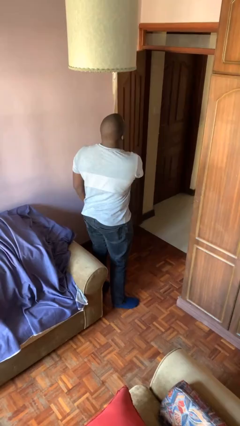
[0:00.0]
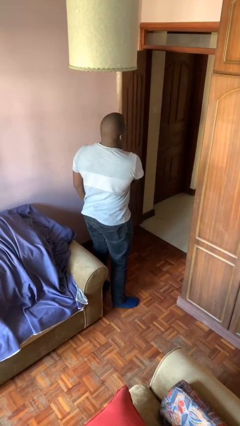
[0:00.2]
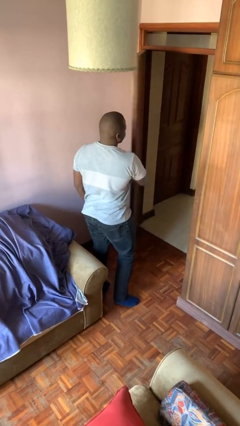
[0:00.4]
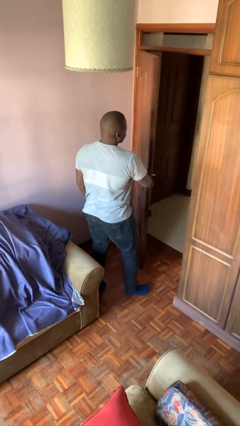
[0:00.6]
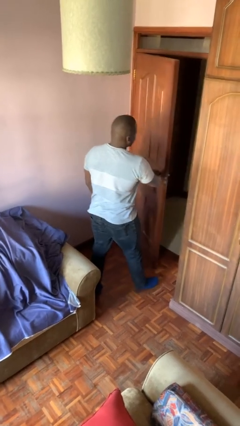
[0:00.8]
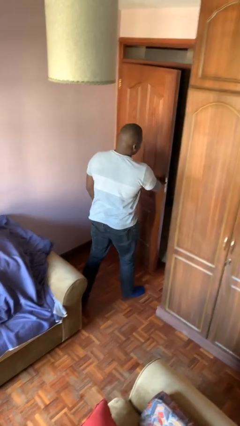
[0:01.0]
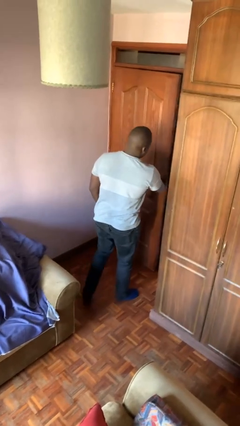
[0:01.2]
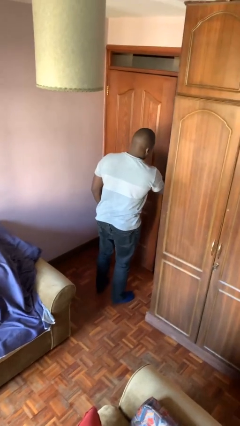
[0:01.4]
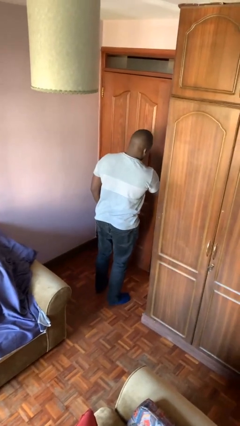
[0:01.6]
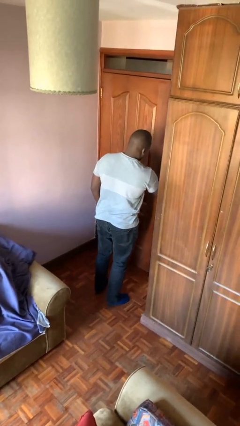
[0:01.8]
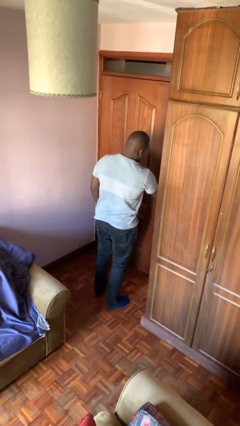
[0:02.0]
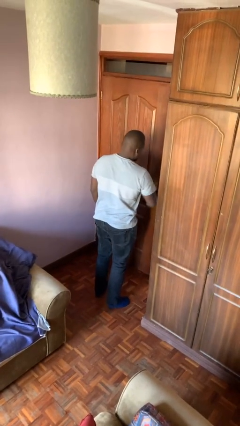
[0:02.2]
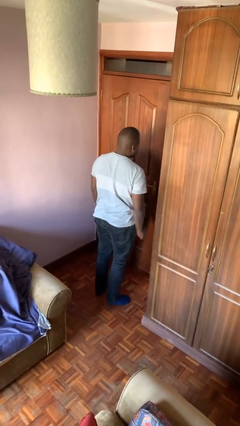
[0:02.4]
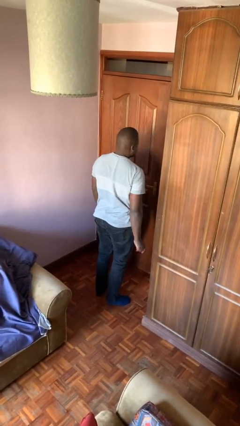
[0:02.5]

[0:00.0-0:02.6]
person closes facility door

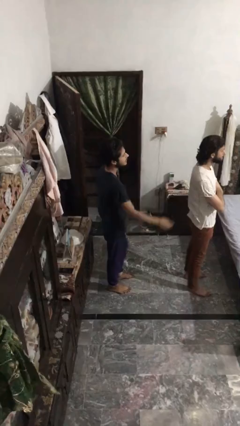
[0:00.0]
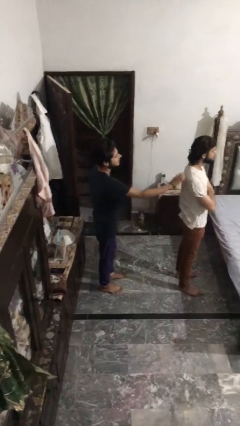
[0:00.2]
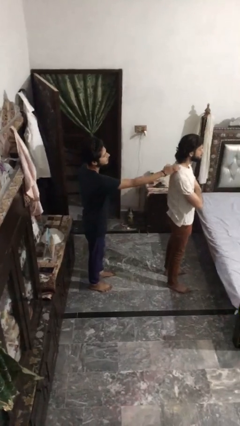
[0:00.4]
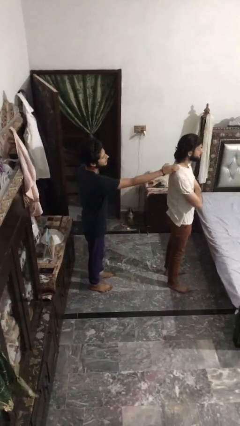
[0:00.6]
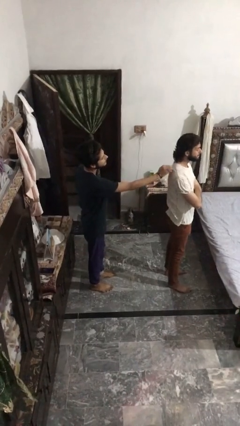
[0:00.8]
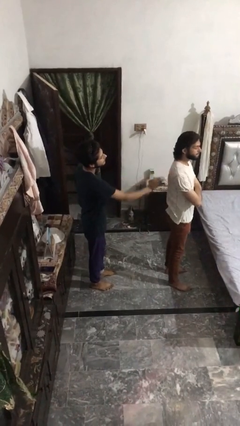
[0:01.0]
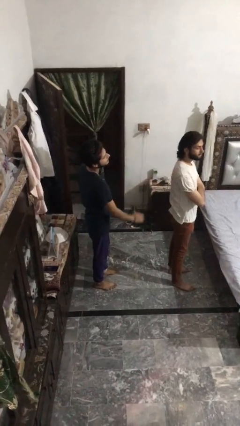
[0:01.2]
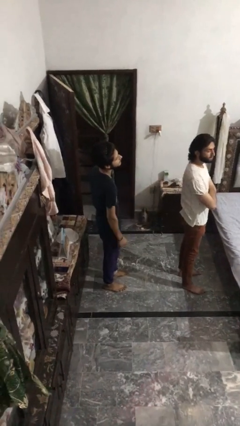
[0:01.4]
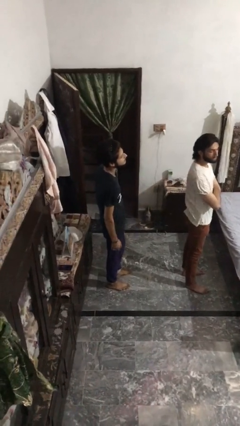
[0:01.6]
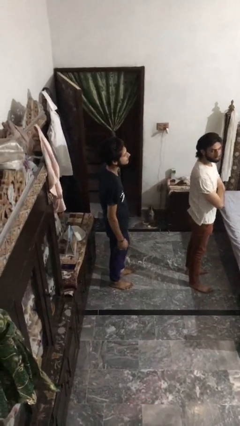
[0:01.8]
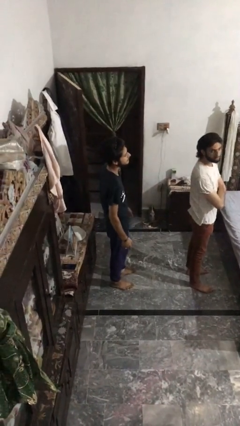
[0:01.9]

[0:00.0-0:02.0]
person touches back of person

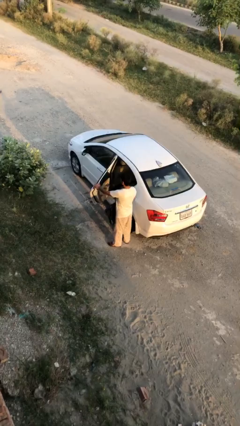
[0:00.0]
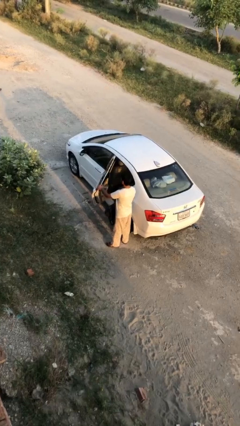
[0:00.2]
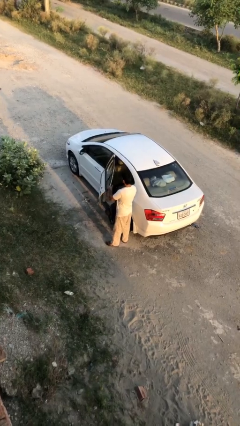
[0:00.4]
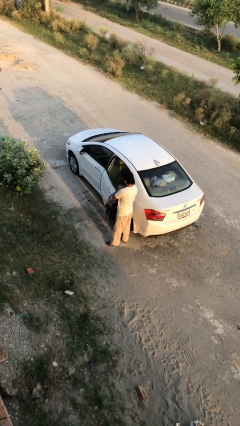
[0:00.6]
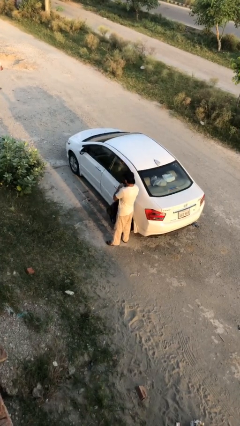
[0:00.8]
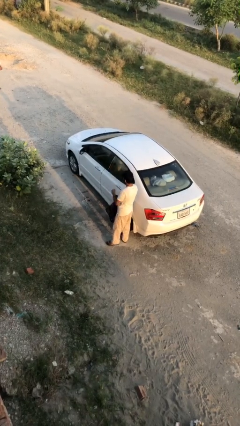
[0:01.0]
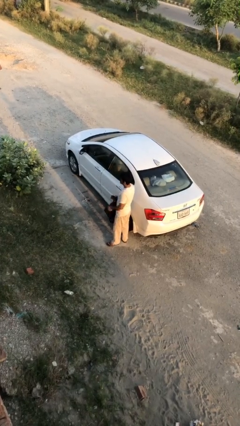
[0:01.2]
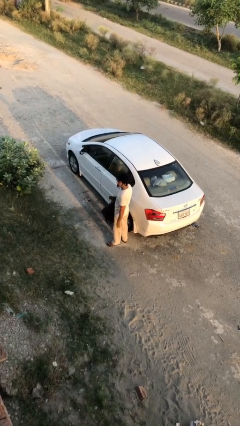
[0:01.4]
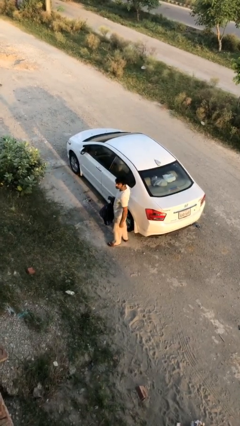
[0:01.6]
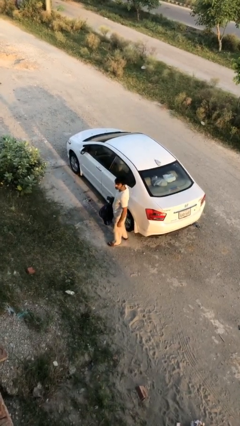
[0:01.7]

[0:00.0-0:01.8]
person closes car door

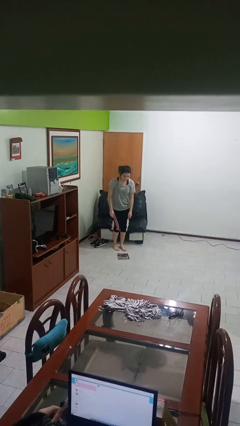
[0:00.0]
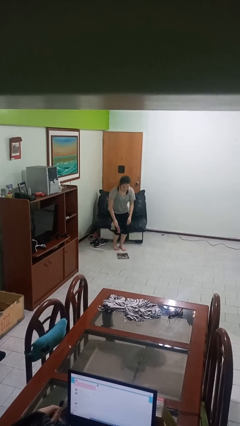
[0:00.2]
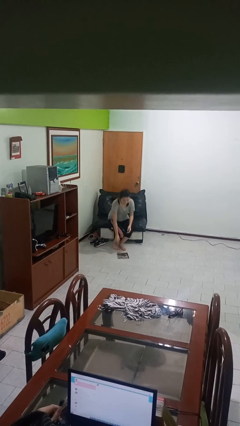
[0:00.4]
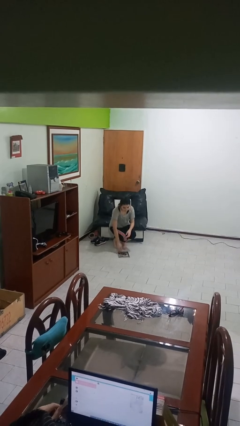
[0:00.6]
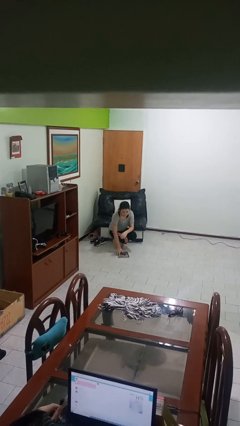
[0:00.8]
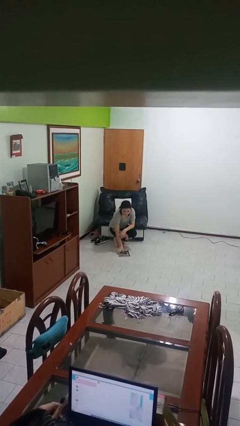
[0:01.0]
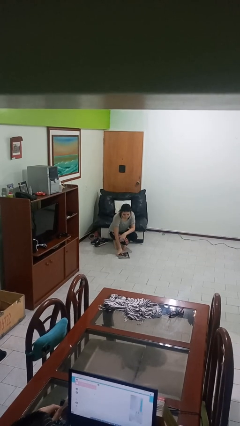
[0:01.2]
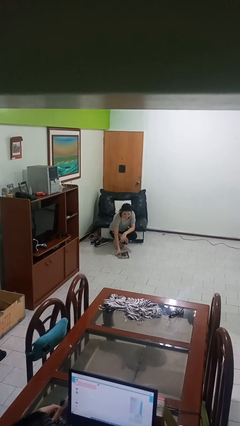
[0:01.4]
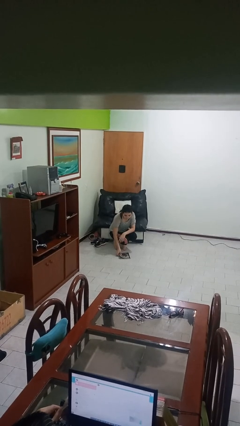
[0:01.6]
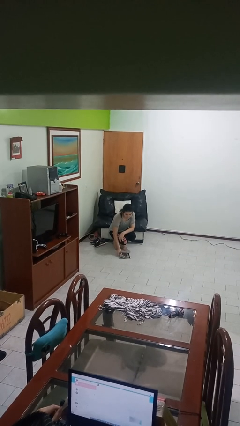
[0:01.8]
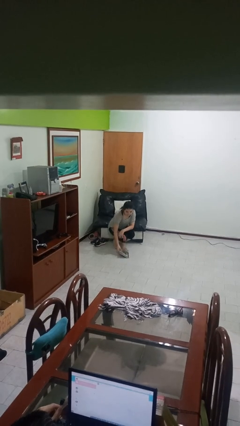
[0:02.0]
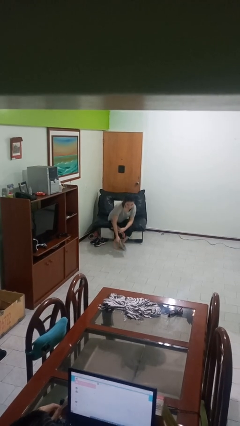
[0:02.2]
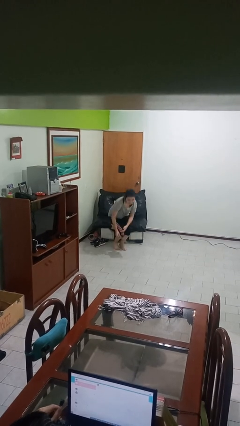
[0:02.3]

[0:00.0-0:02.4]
person picks up object from floor

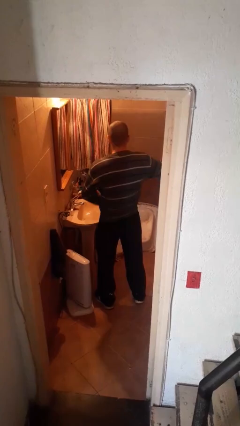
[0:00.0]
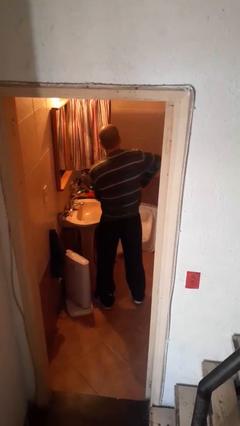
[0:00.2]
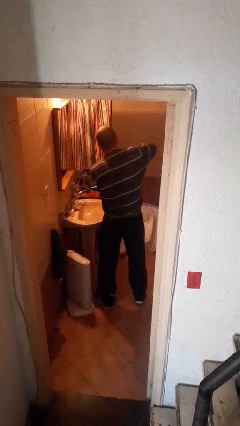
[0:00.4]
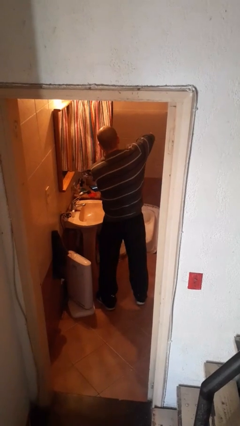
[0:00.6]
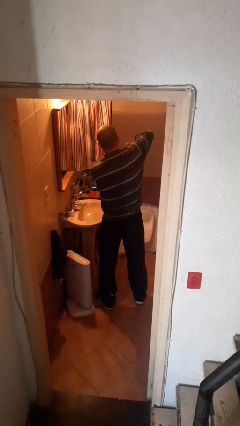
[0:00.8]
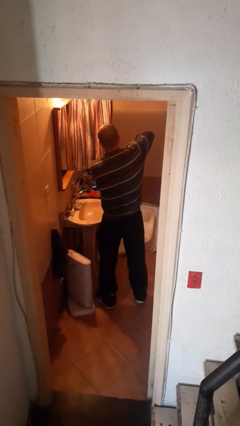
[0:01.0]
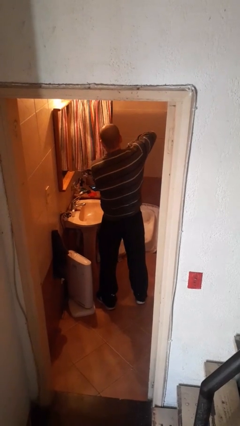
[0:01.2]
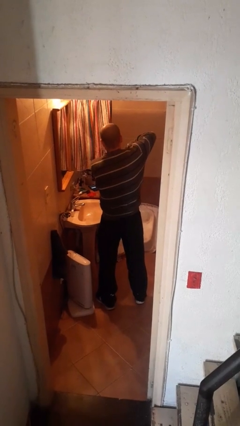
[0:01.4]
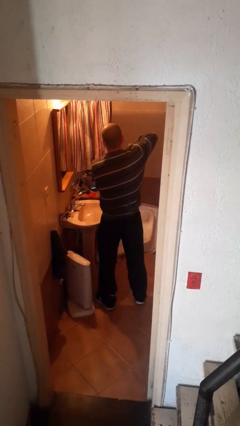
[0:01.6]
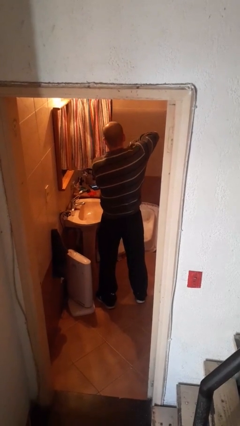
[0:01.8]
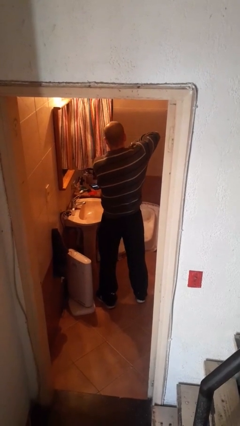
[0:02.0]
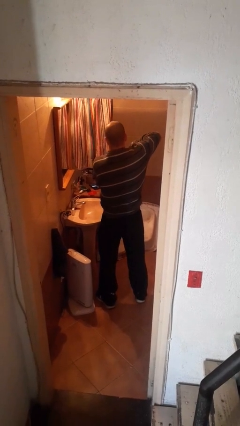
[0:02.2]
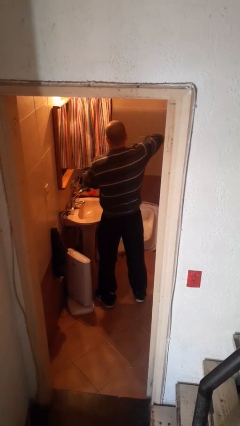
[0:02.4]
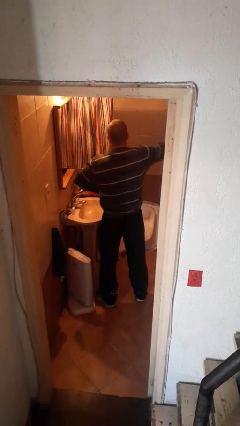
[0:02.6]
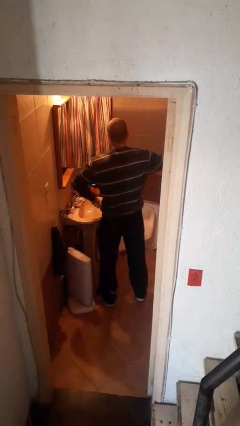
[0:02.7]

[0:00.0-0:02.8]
person applies deodorant

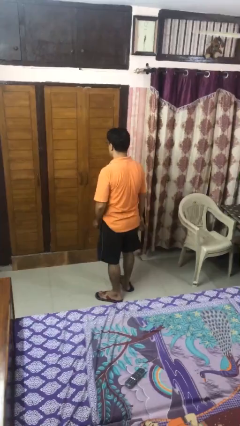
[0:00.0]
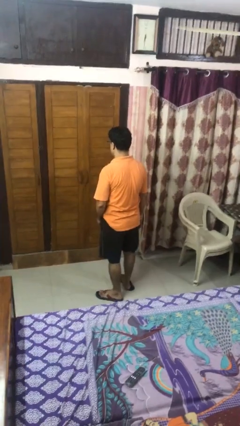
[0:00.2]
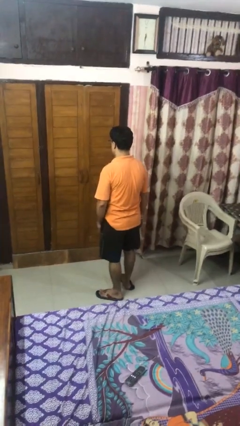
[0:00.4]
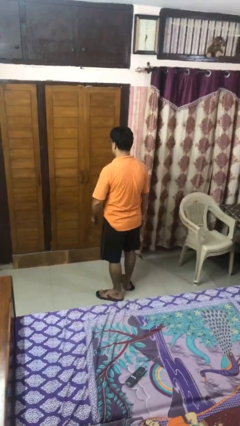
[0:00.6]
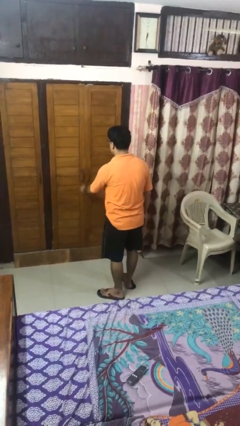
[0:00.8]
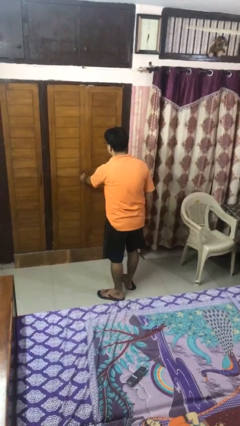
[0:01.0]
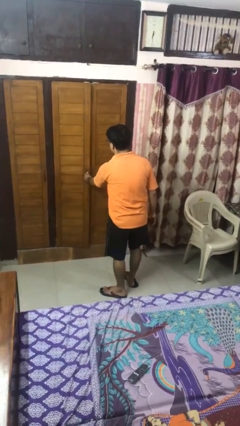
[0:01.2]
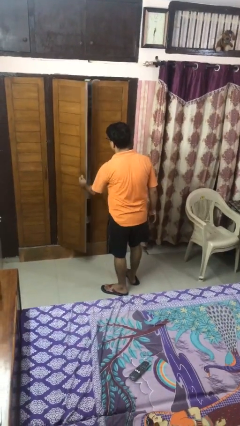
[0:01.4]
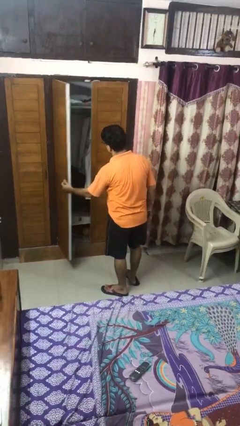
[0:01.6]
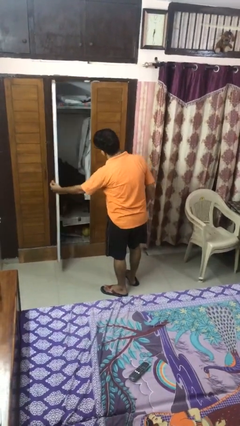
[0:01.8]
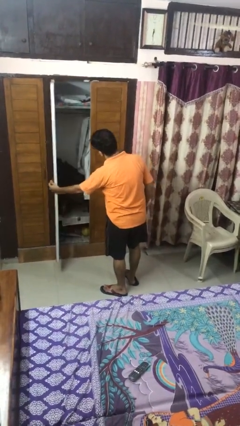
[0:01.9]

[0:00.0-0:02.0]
person opens closet door

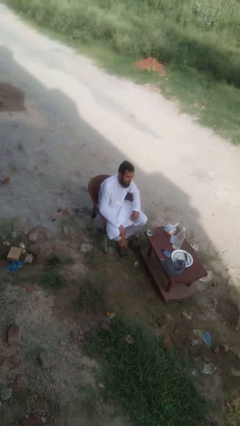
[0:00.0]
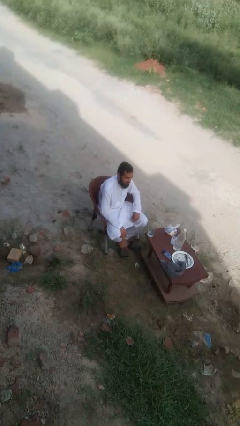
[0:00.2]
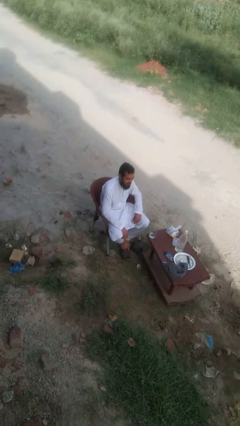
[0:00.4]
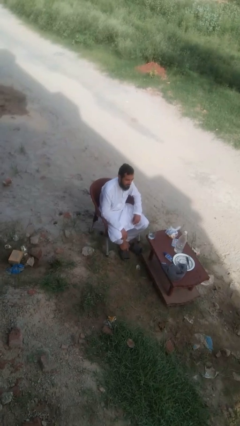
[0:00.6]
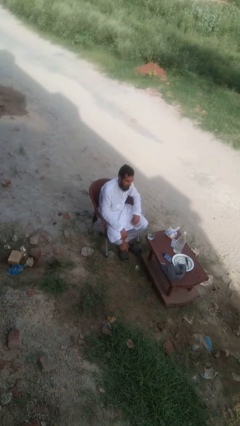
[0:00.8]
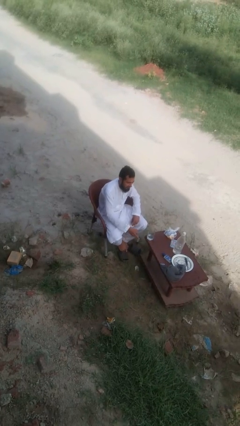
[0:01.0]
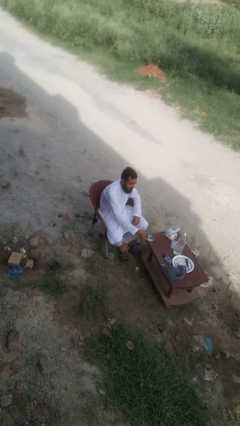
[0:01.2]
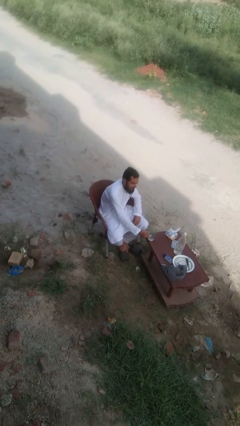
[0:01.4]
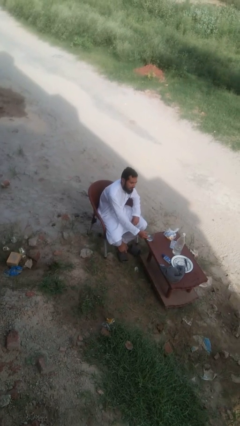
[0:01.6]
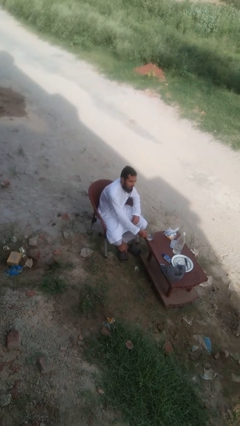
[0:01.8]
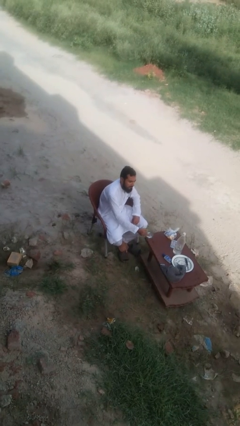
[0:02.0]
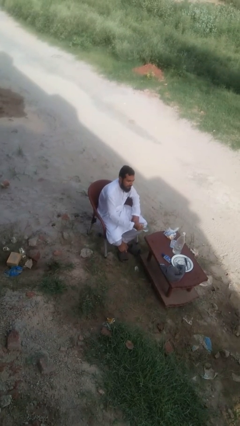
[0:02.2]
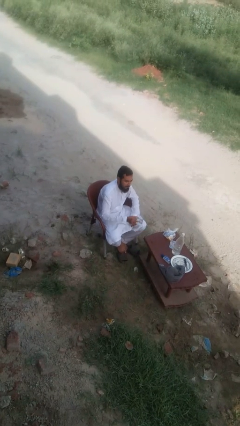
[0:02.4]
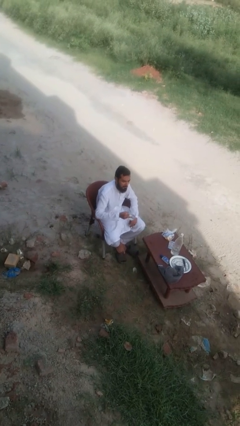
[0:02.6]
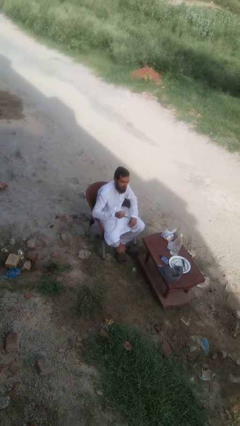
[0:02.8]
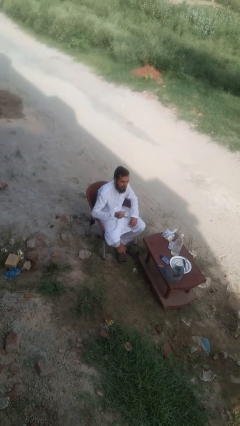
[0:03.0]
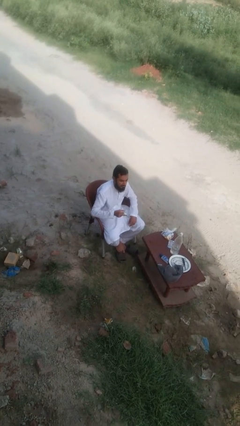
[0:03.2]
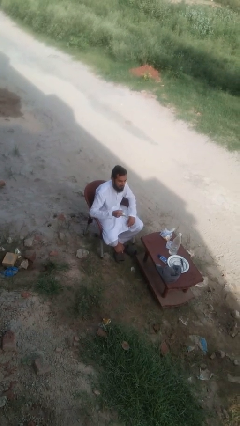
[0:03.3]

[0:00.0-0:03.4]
person picks up object from table
